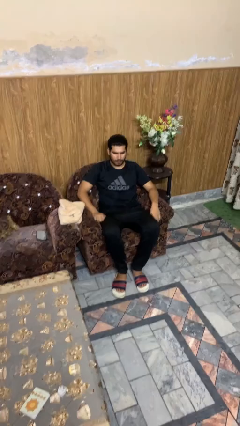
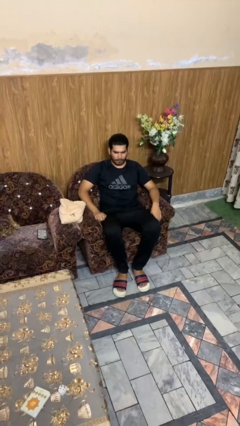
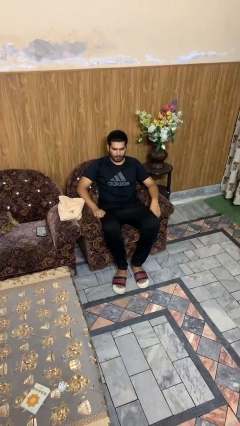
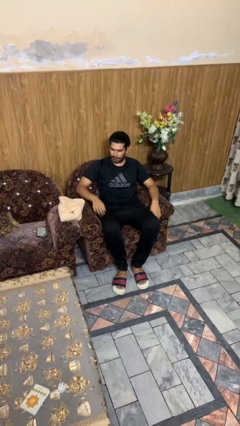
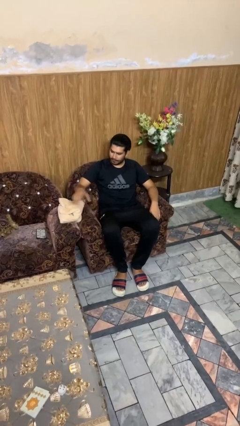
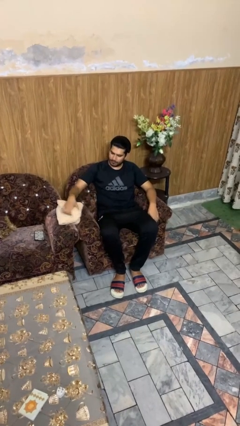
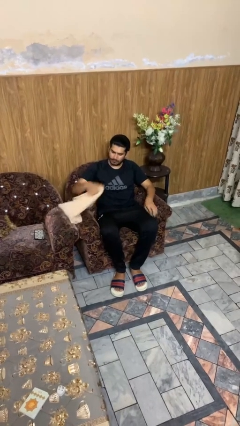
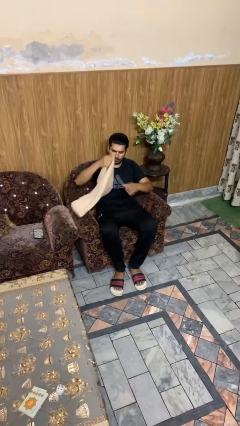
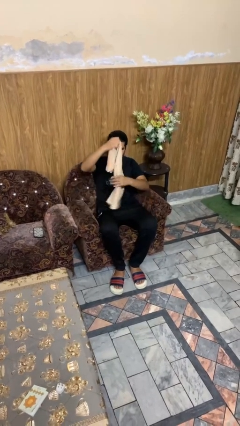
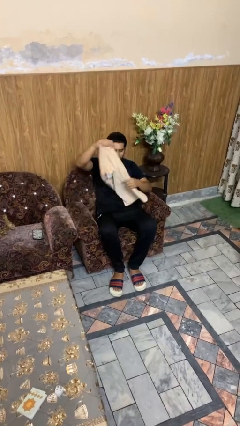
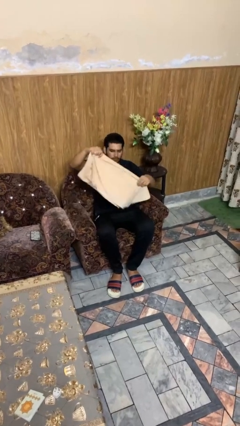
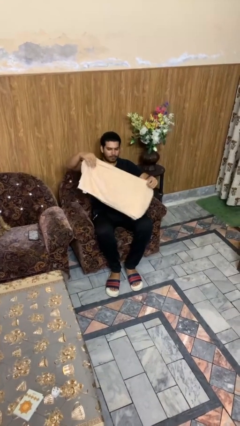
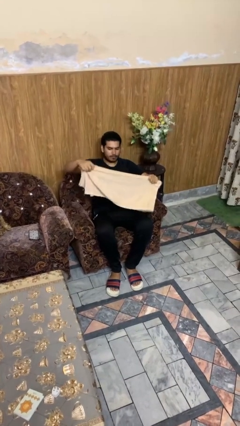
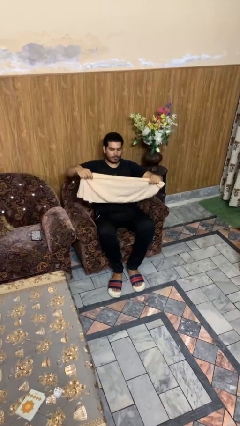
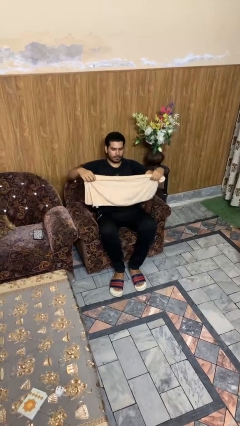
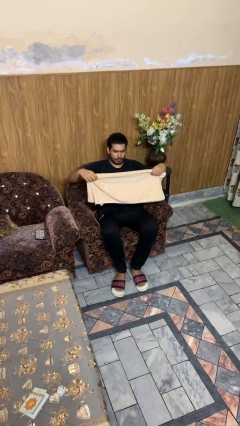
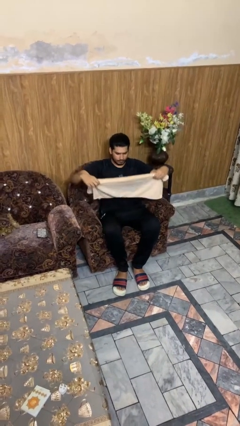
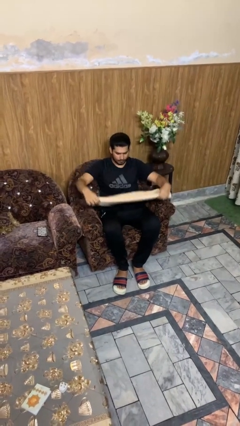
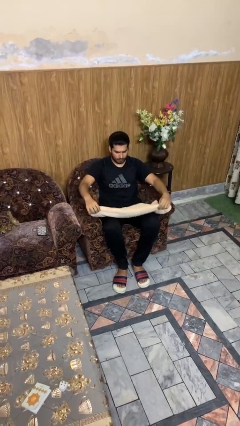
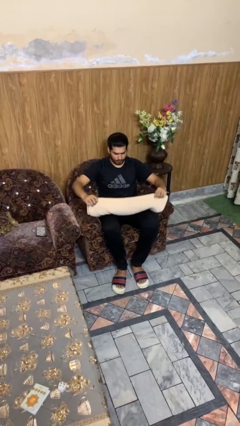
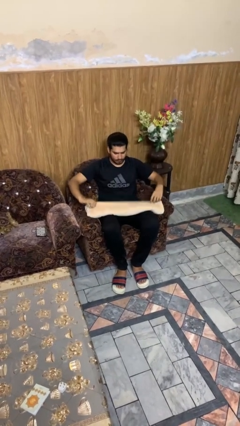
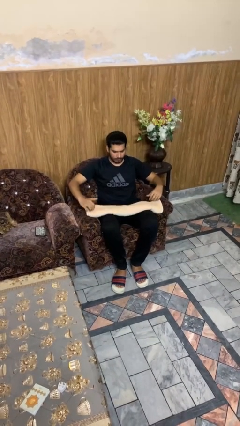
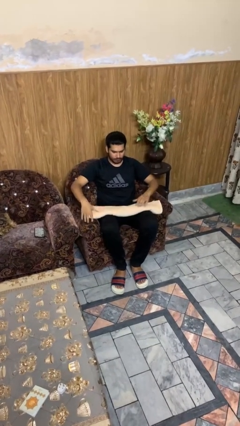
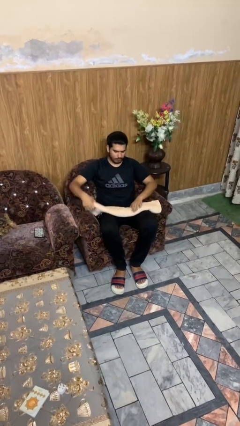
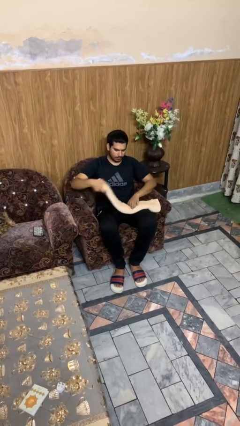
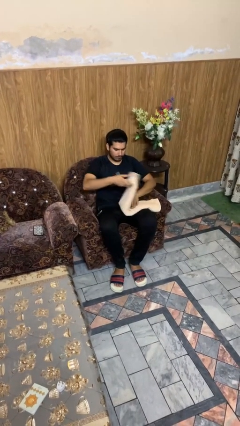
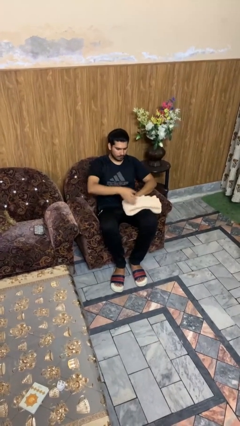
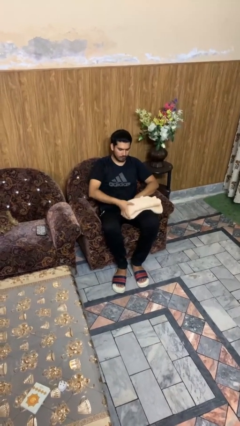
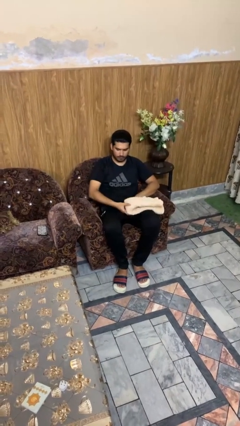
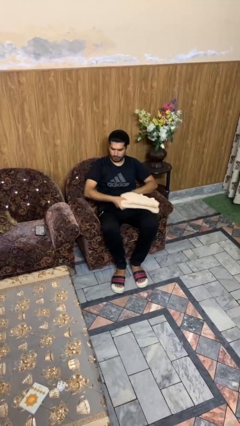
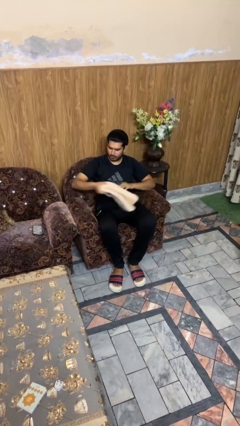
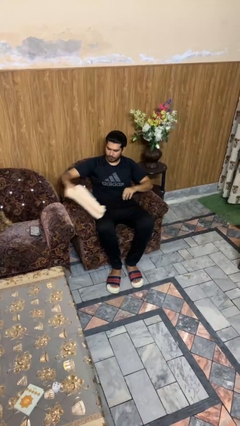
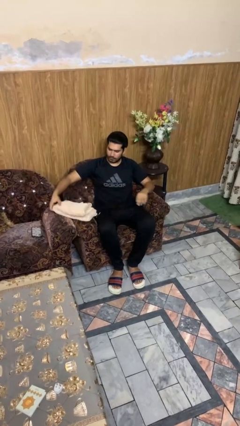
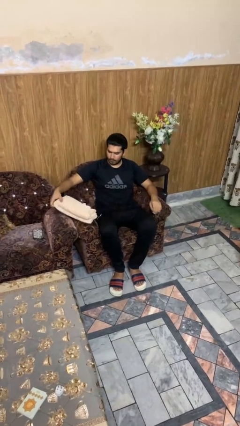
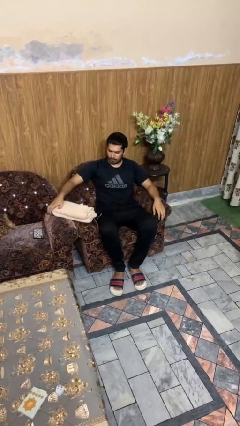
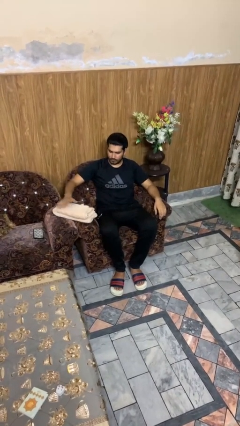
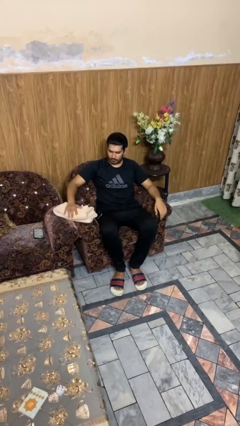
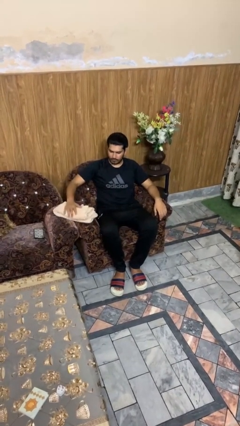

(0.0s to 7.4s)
person folds towel

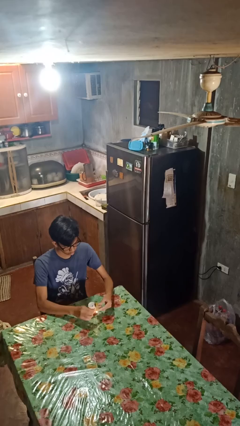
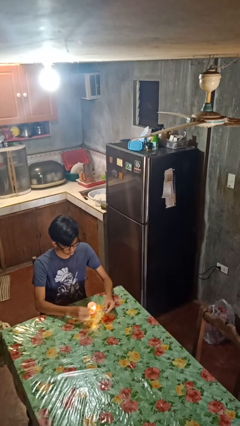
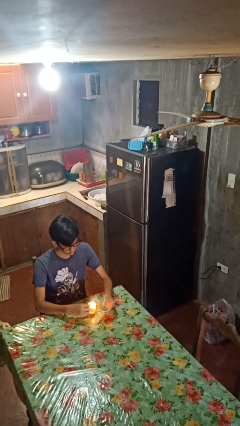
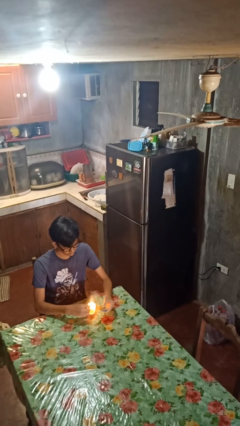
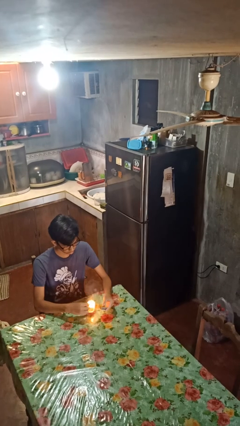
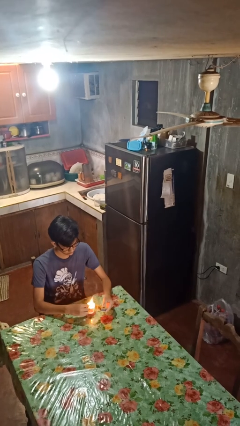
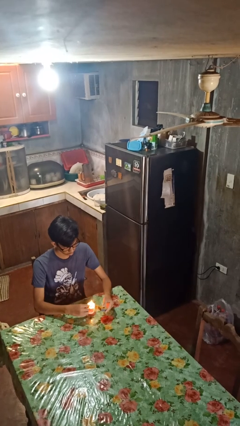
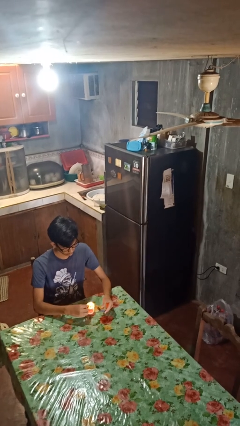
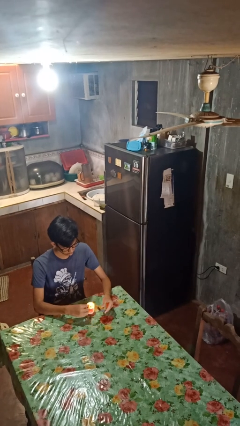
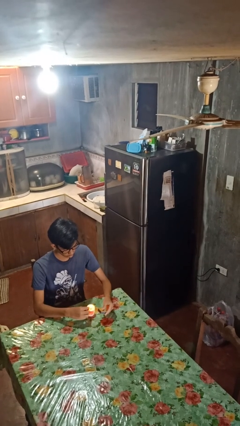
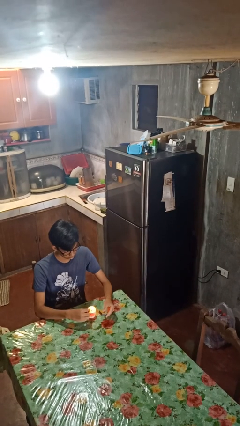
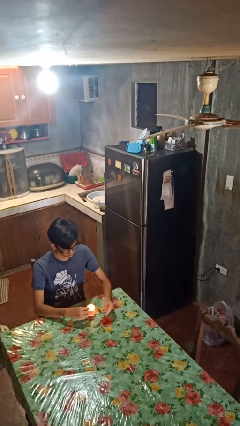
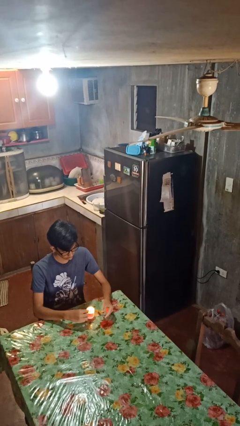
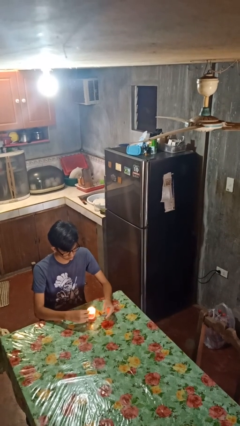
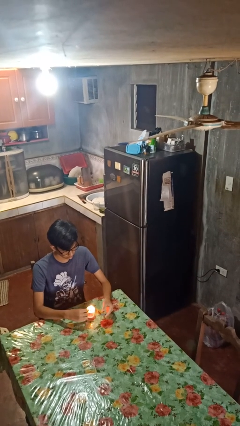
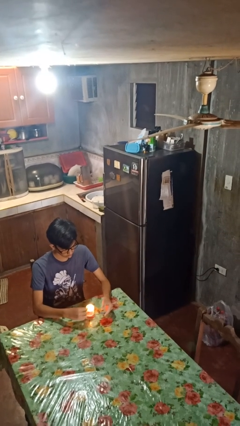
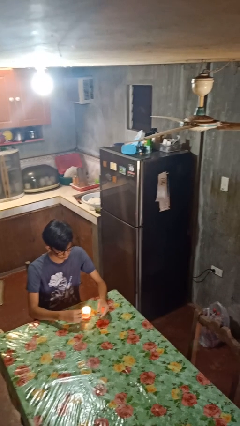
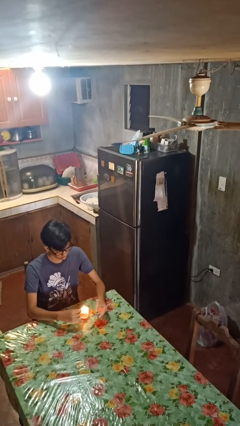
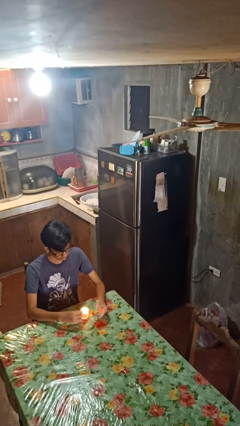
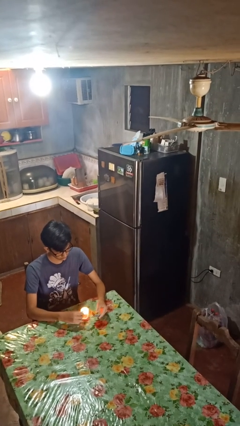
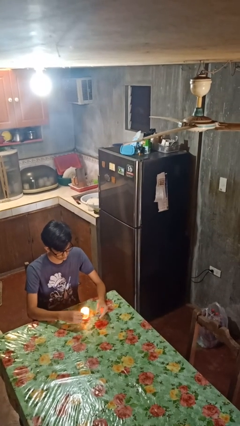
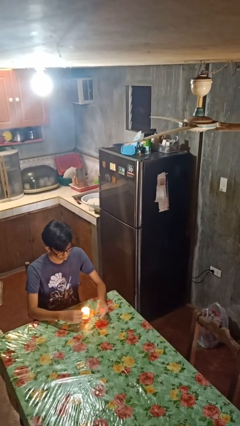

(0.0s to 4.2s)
person lights candle

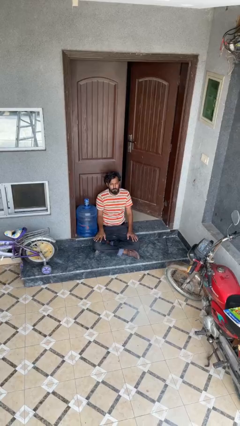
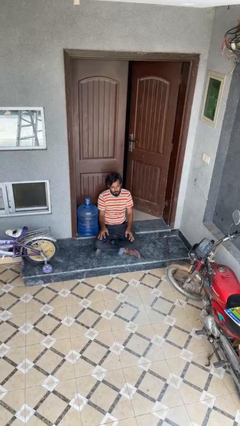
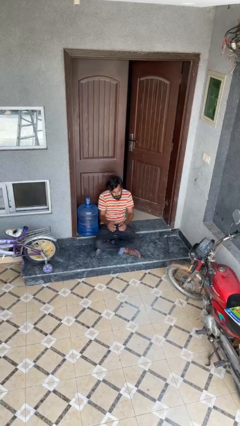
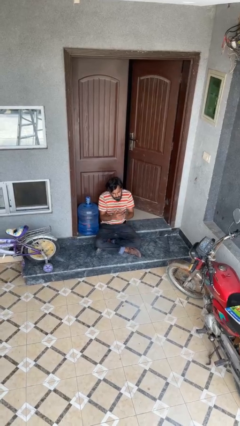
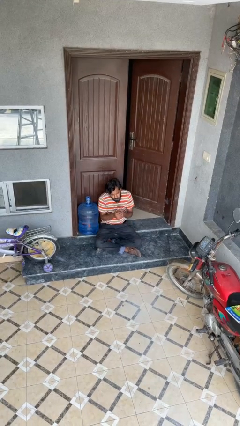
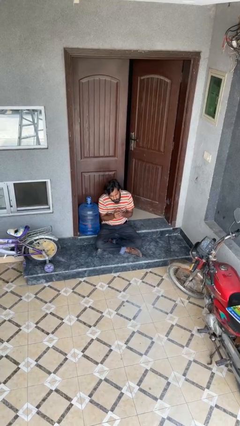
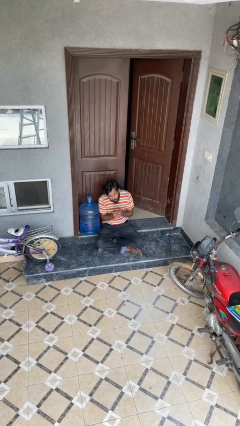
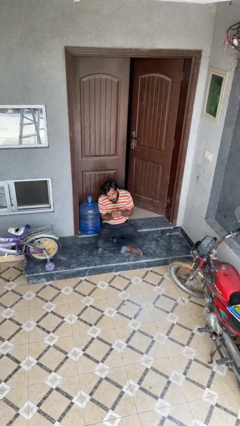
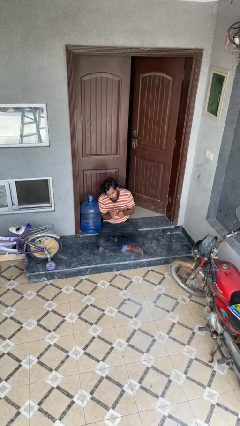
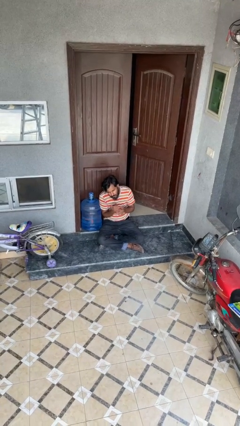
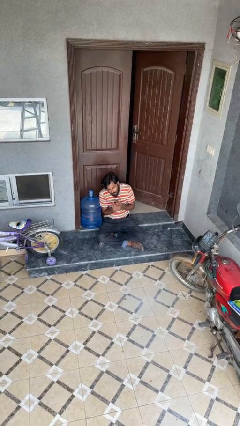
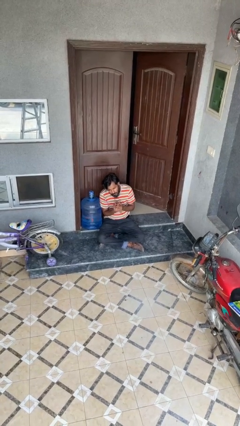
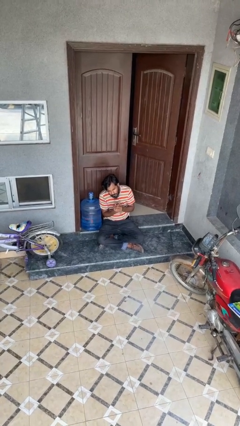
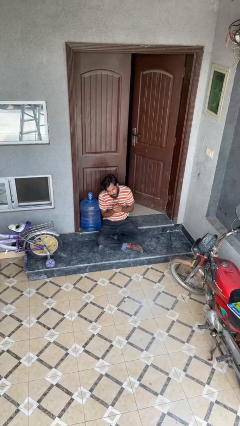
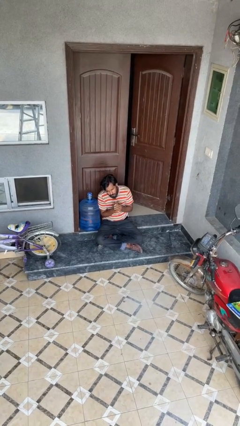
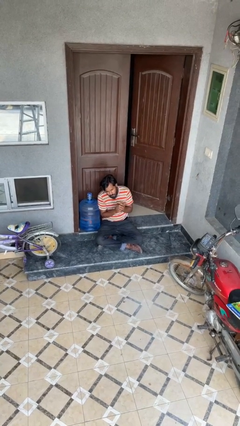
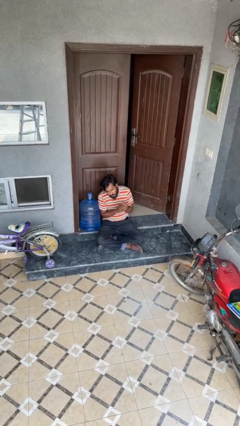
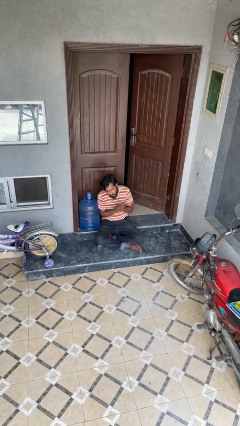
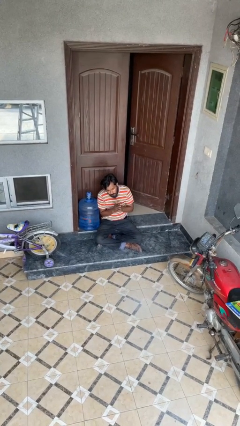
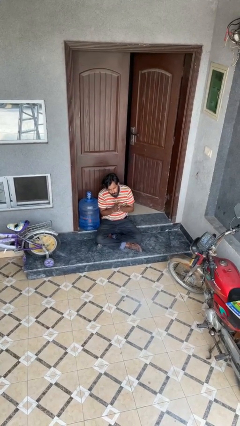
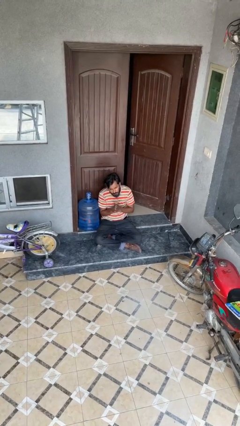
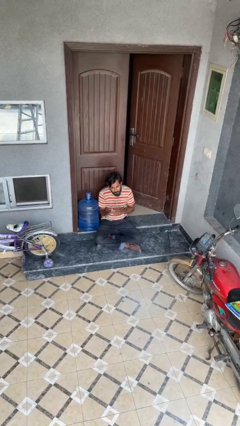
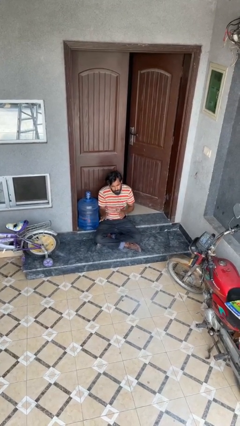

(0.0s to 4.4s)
person looks at hands in lap

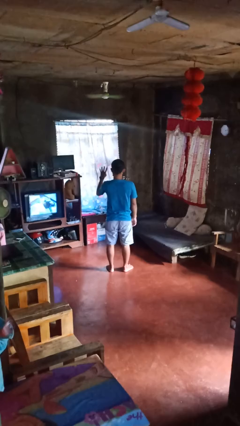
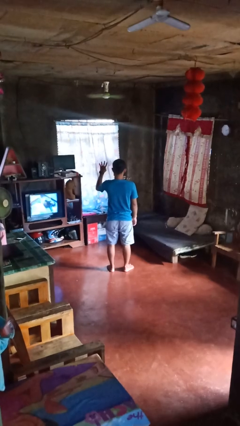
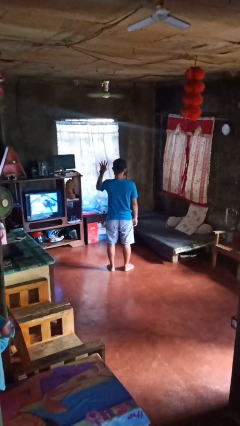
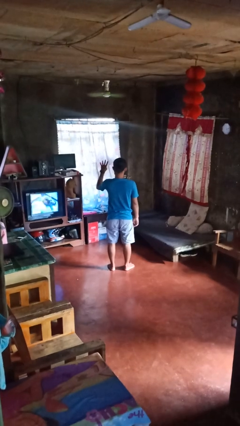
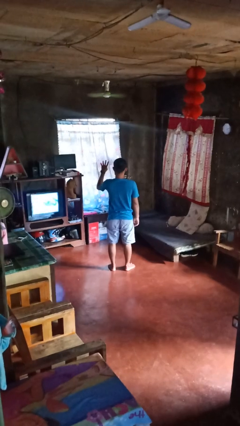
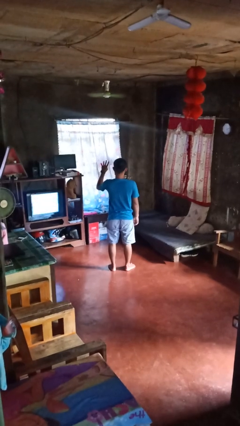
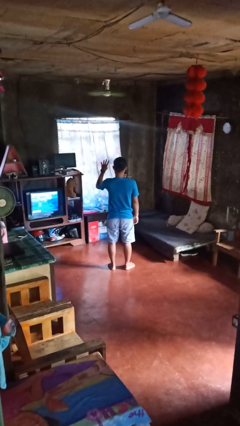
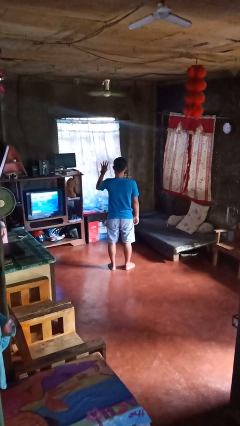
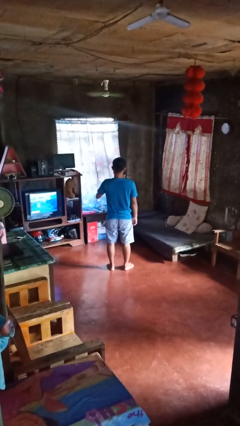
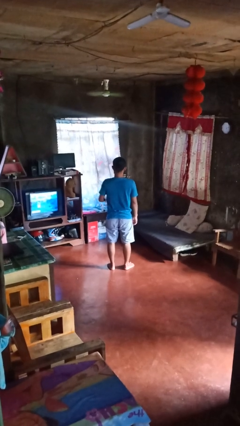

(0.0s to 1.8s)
person gestures number four
